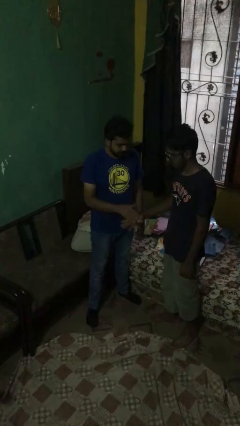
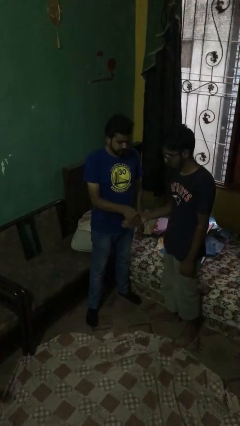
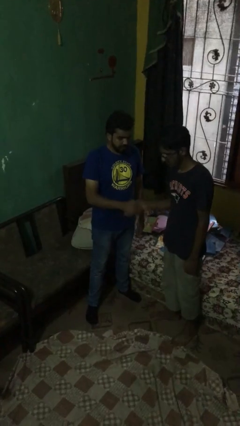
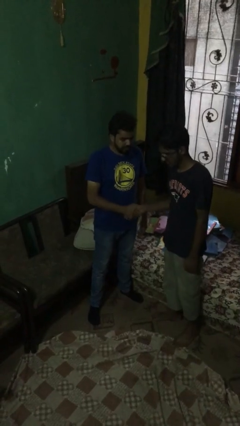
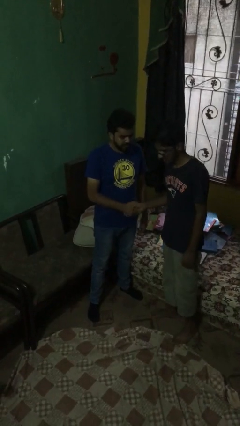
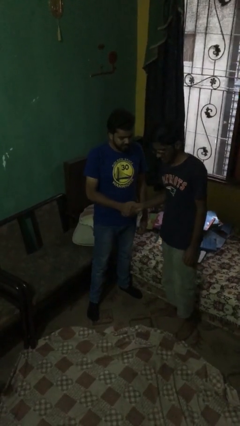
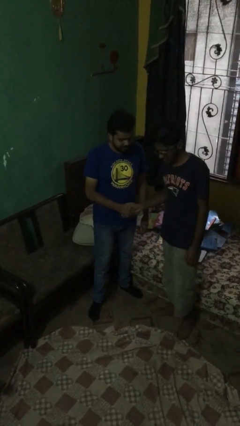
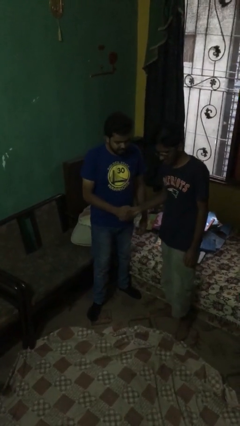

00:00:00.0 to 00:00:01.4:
person shakes hand

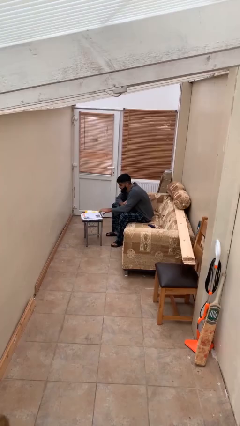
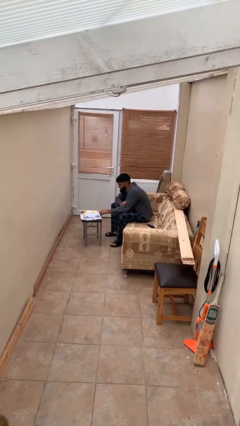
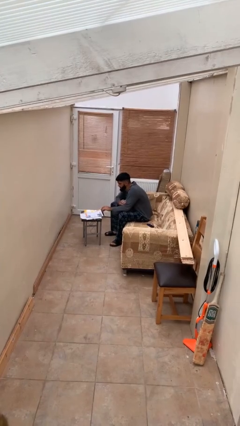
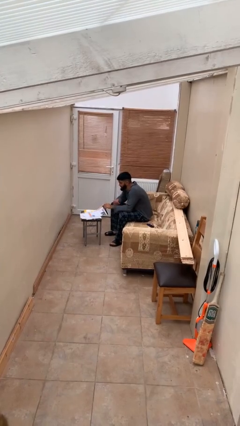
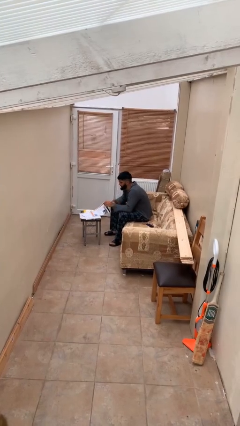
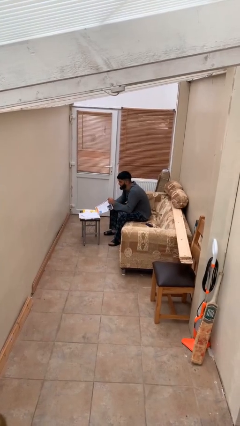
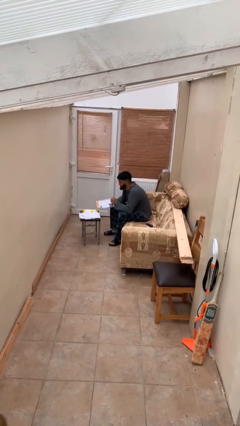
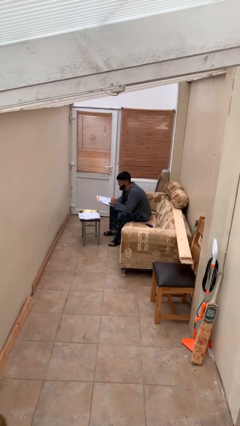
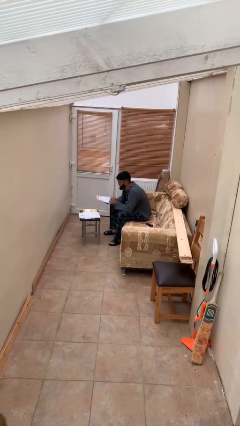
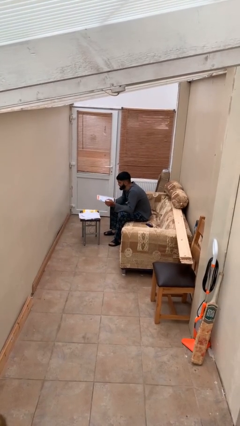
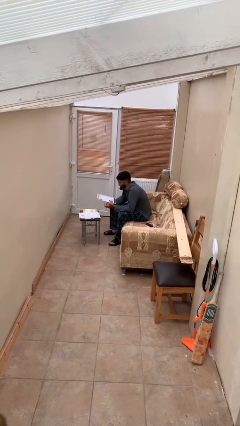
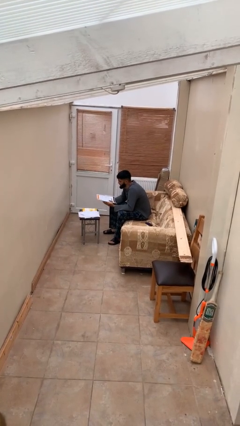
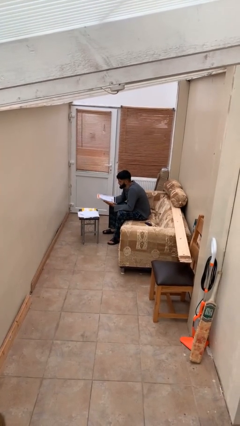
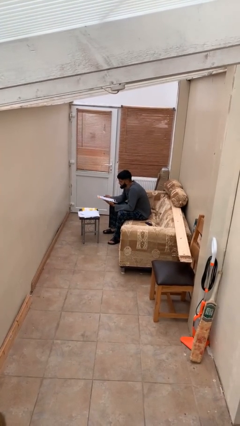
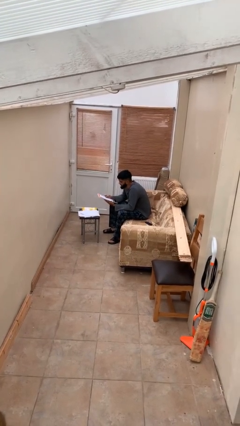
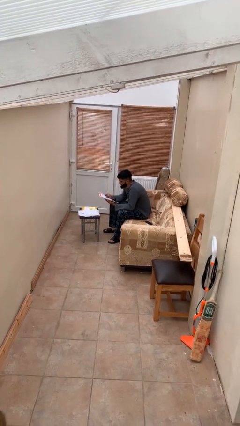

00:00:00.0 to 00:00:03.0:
person picks up object from table

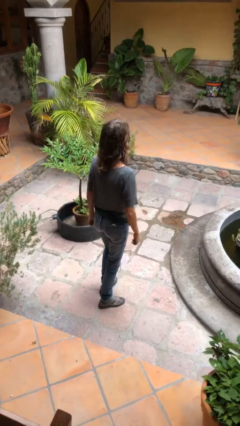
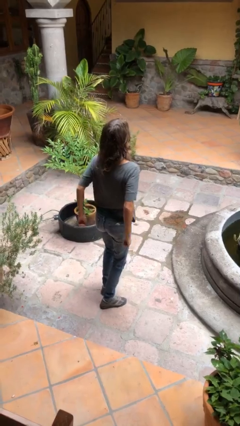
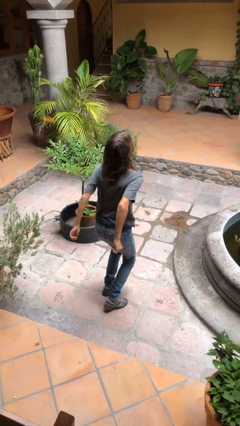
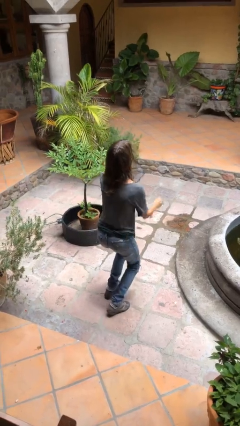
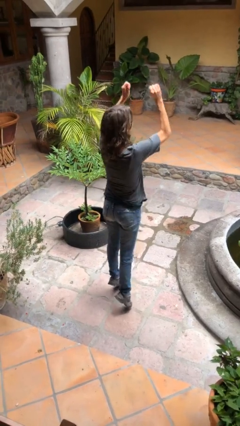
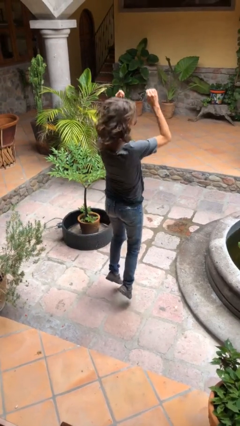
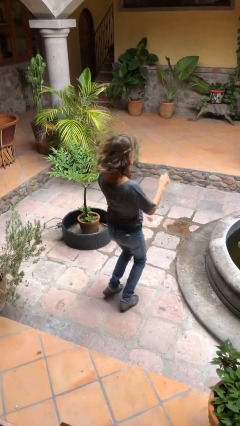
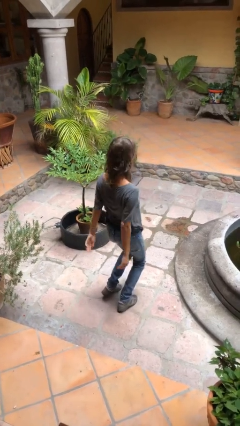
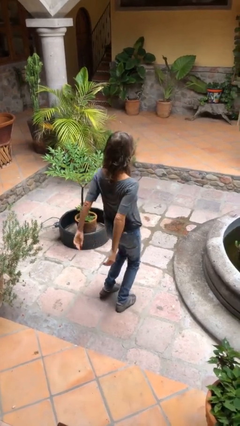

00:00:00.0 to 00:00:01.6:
person jumps

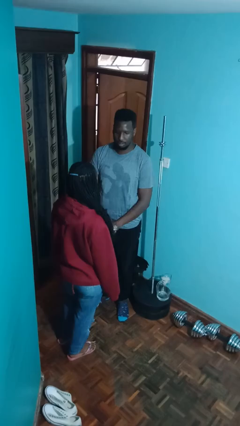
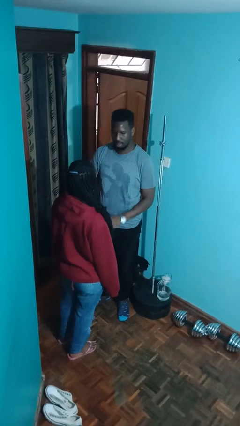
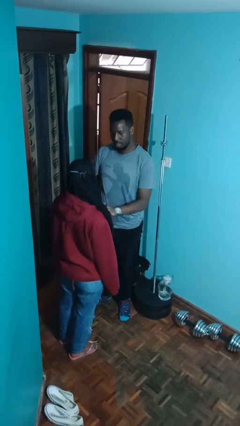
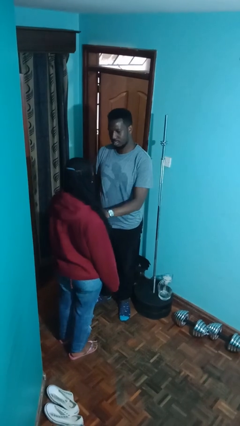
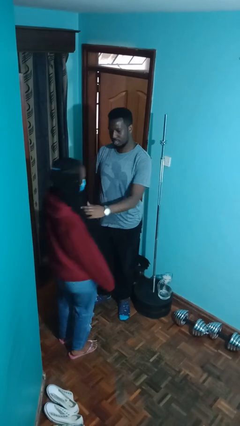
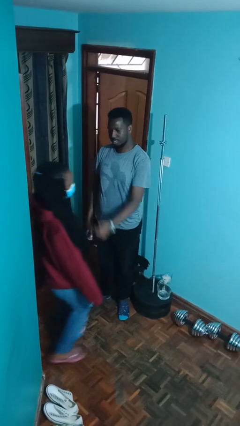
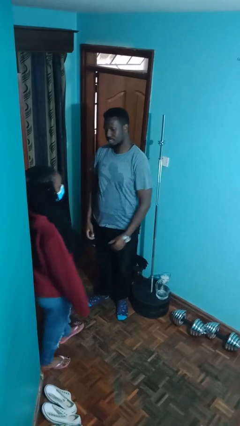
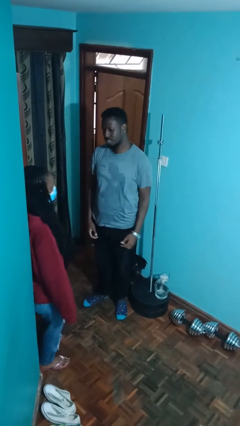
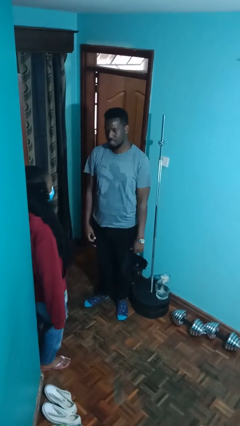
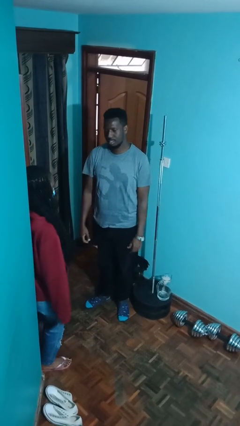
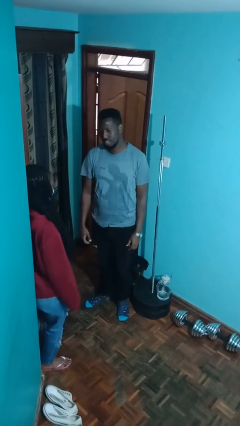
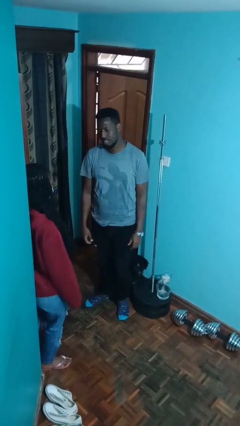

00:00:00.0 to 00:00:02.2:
person shoves person

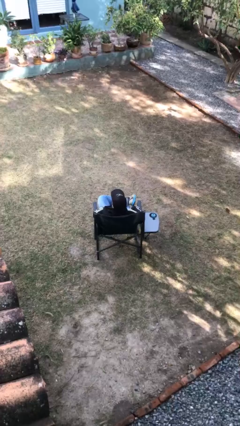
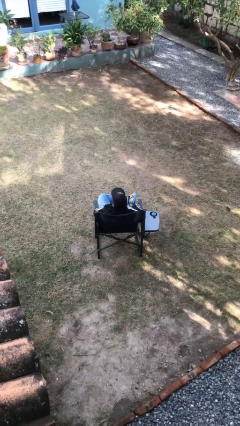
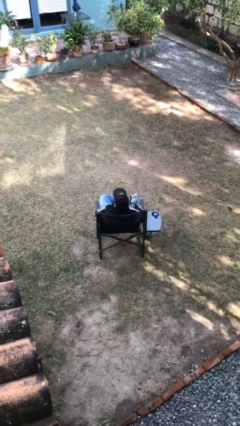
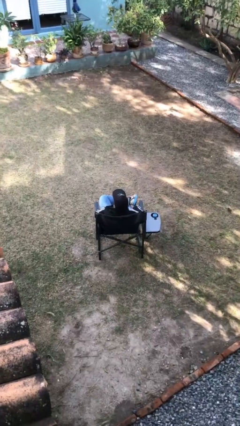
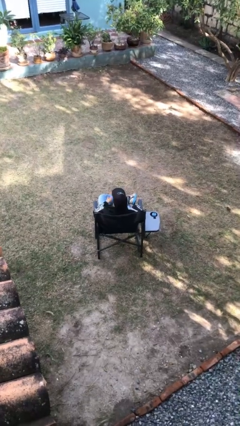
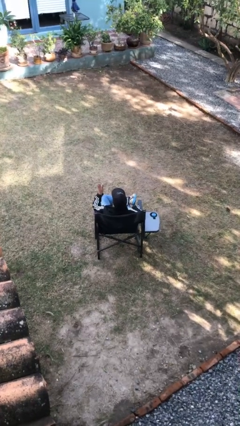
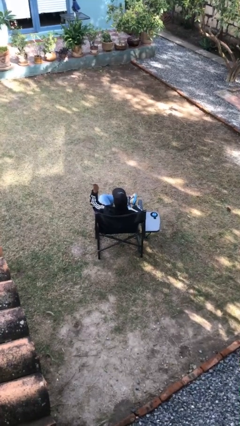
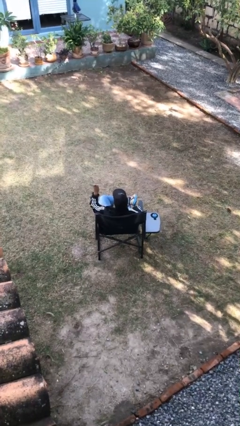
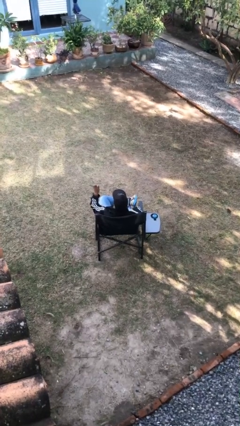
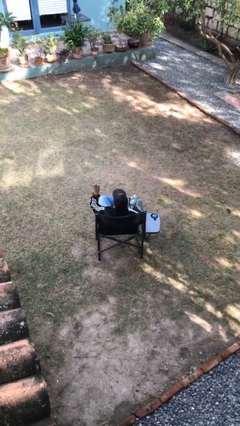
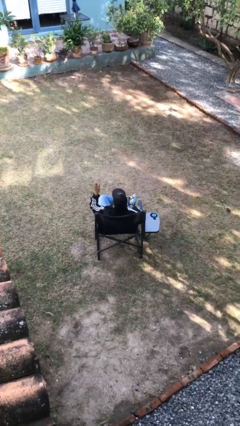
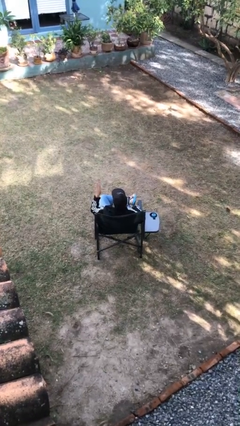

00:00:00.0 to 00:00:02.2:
person gestures number four

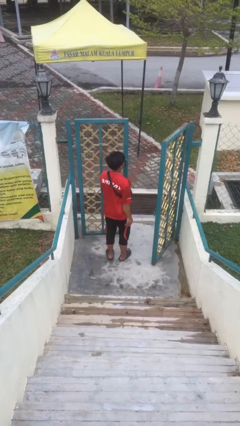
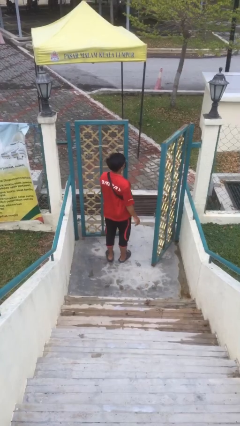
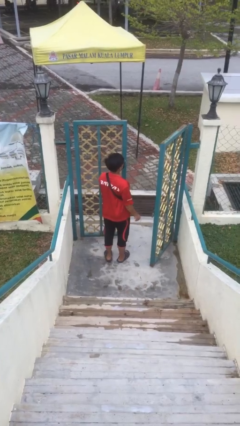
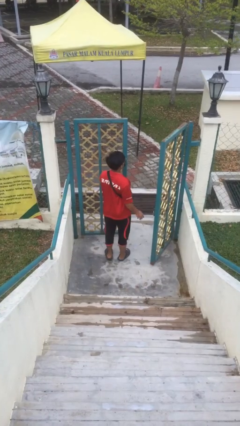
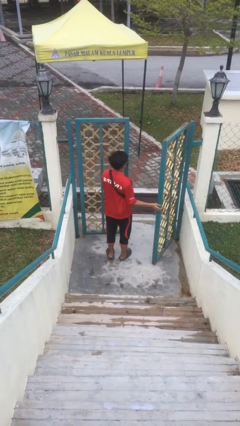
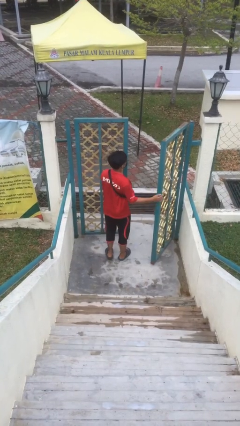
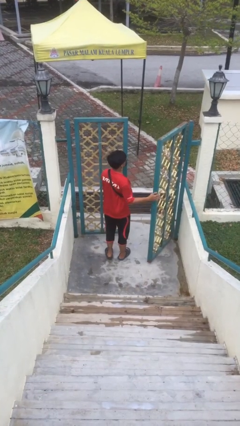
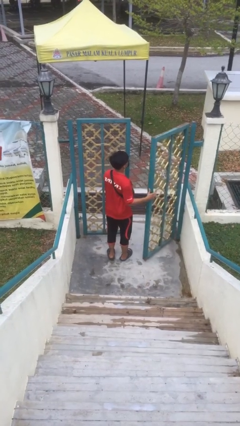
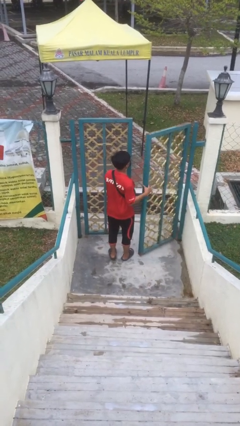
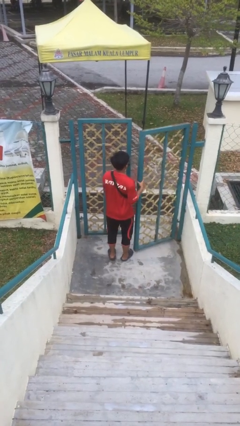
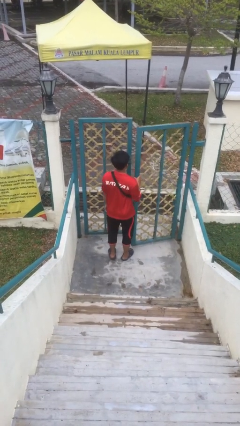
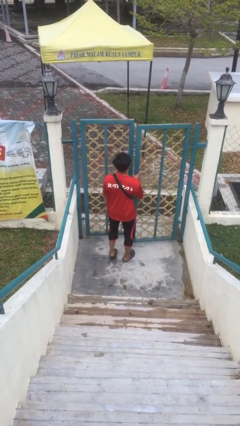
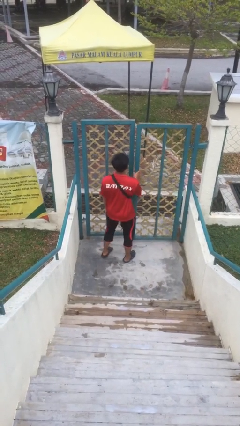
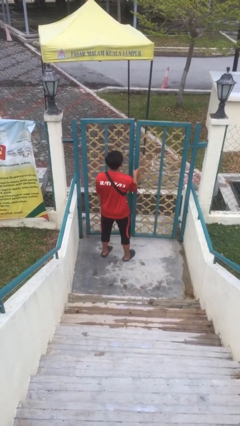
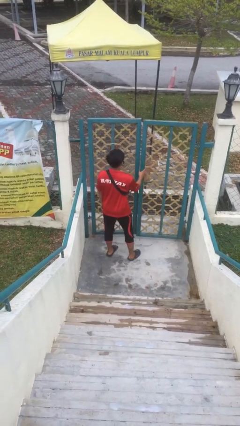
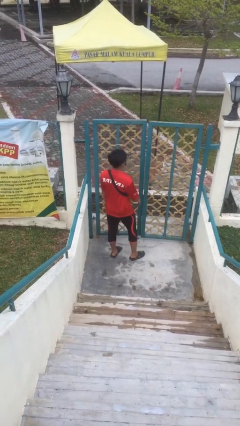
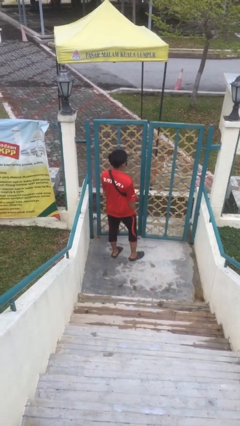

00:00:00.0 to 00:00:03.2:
person closes facility door

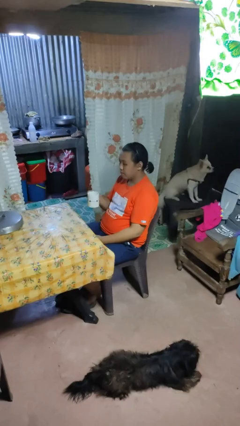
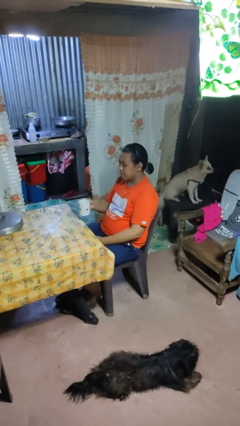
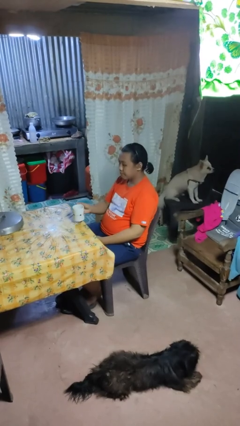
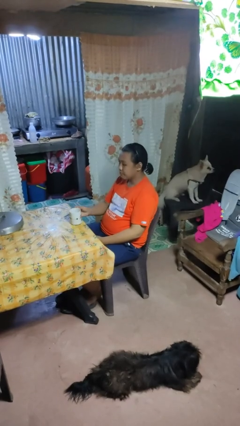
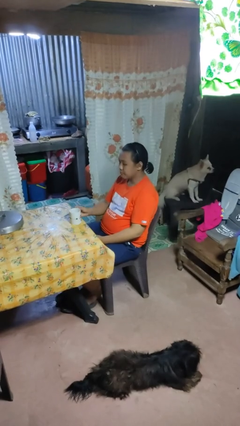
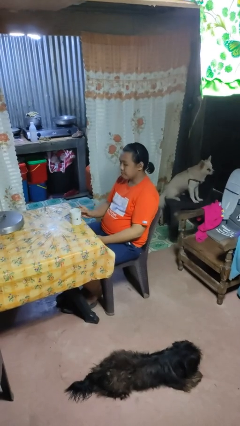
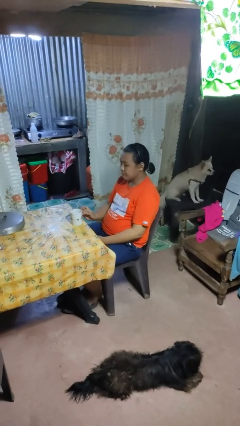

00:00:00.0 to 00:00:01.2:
person puts down object on table

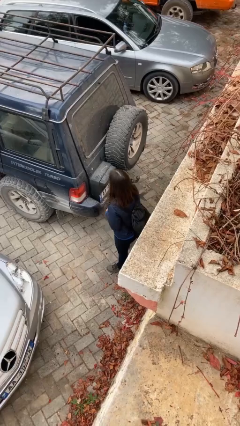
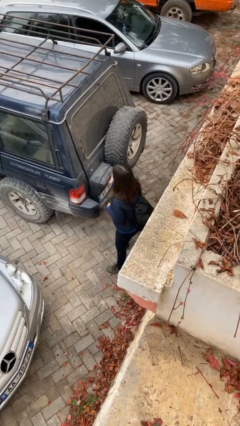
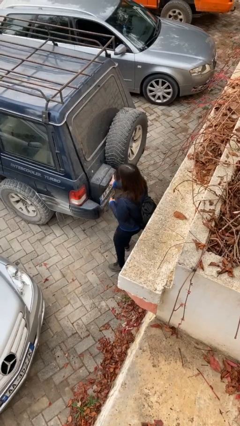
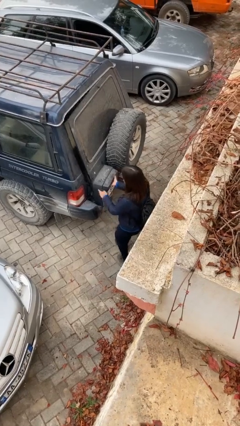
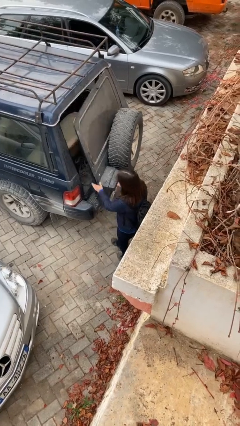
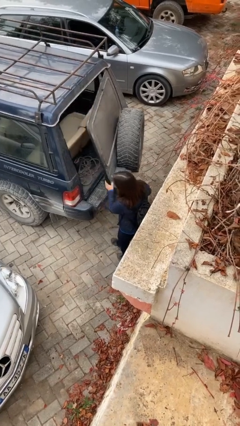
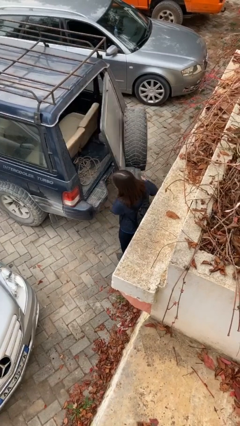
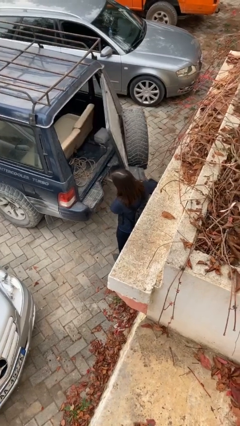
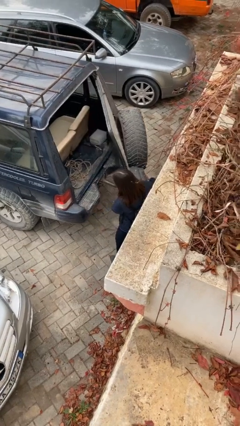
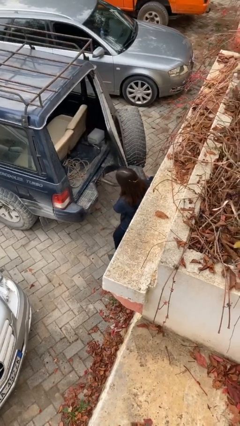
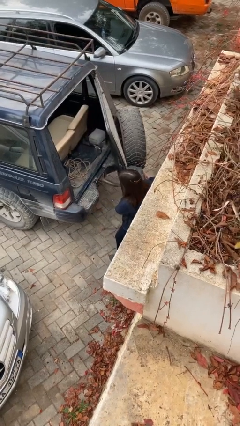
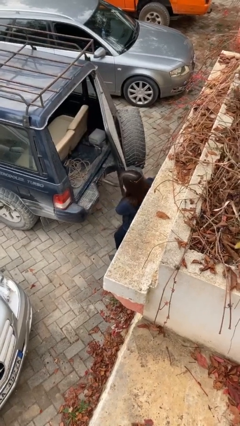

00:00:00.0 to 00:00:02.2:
person opens car trunk
